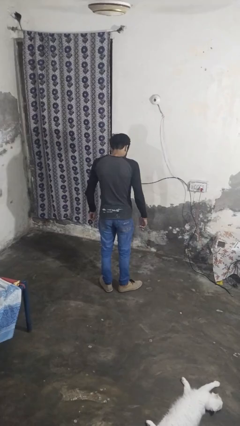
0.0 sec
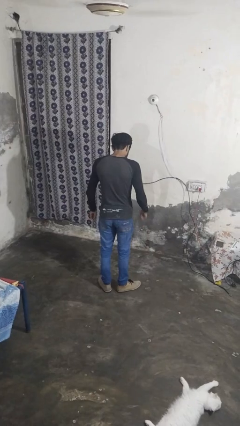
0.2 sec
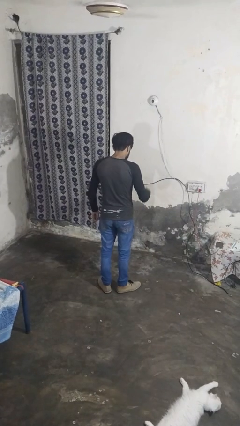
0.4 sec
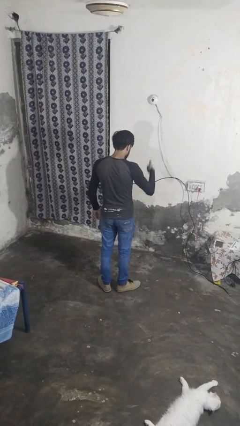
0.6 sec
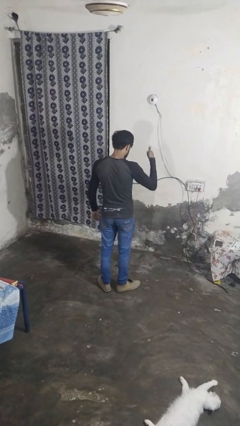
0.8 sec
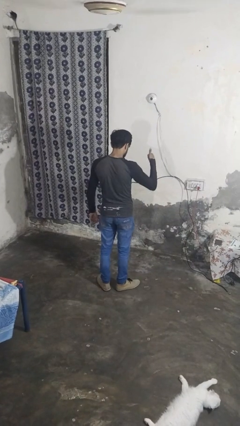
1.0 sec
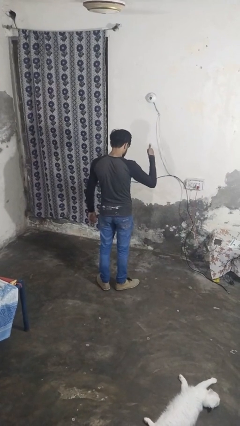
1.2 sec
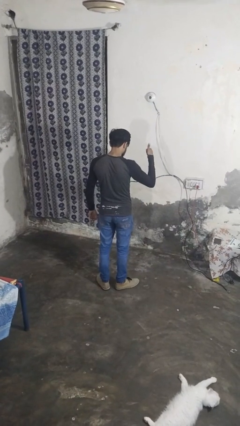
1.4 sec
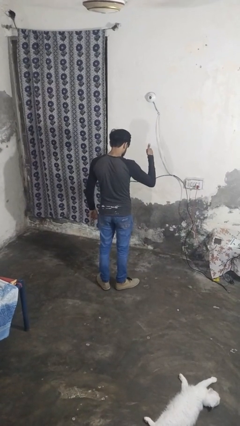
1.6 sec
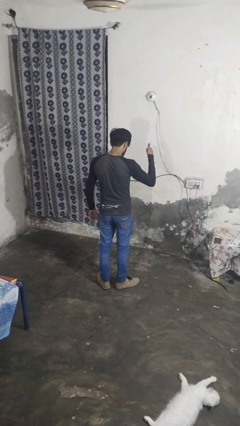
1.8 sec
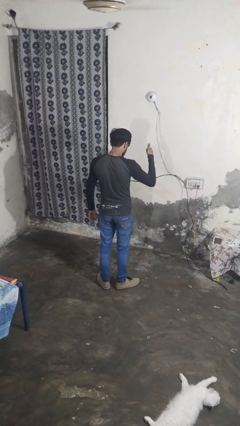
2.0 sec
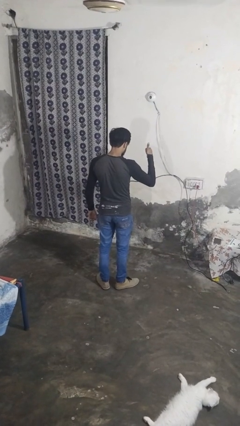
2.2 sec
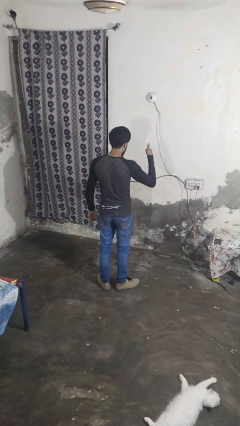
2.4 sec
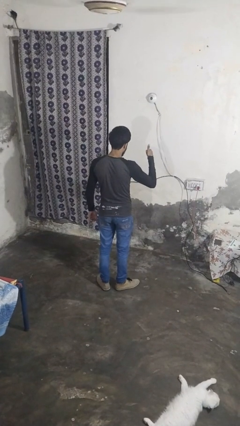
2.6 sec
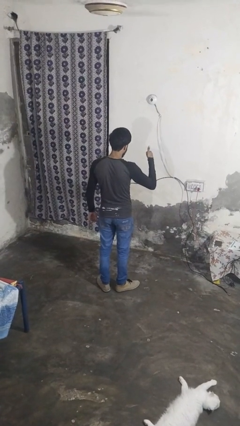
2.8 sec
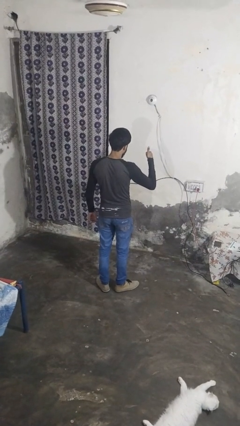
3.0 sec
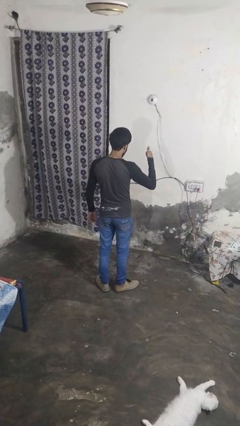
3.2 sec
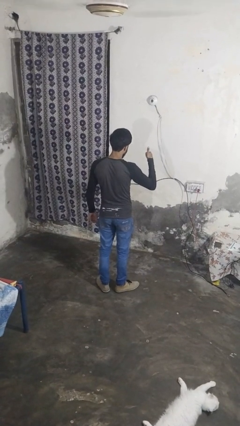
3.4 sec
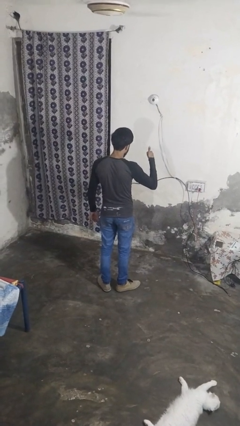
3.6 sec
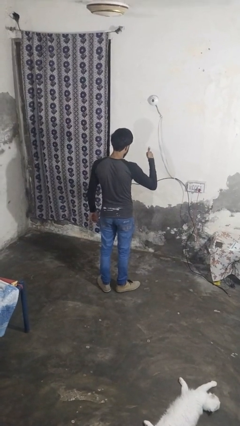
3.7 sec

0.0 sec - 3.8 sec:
person gestures thumbs up

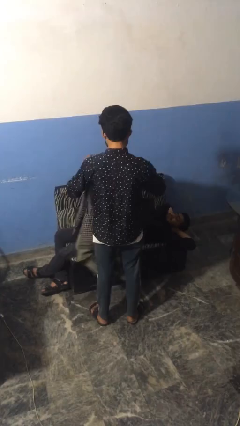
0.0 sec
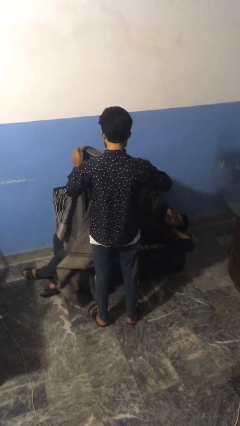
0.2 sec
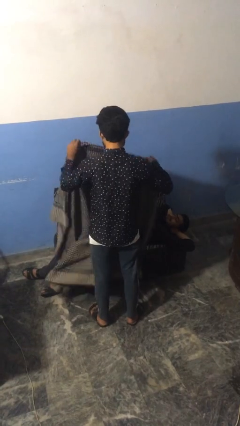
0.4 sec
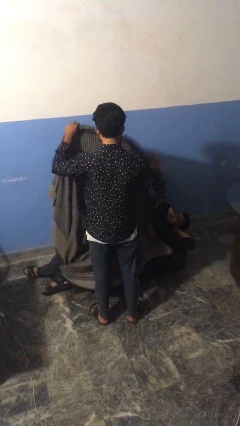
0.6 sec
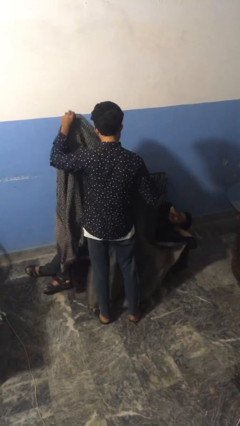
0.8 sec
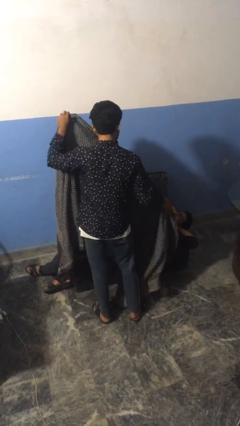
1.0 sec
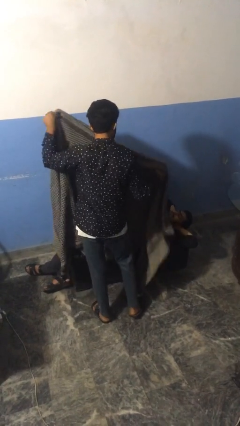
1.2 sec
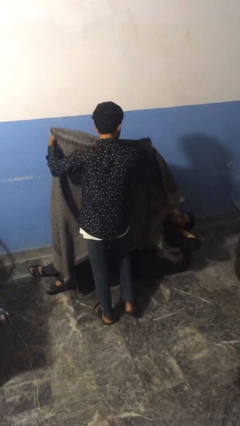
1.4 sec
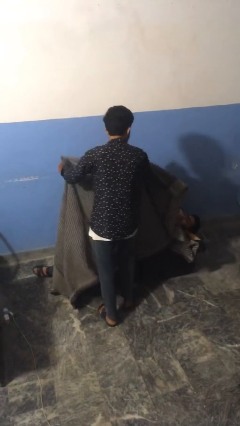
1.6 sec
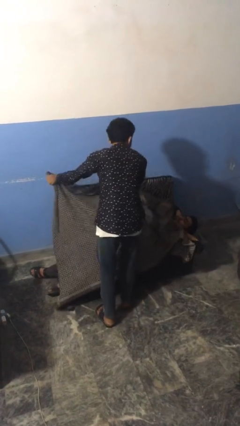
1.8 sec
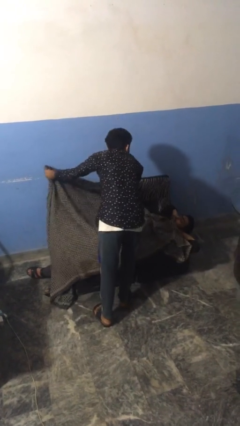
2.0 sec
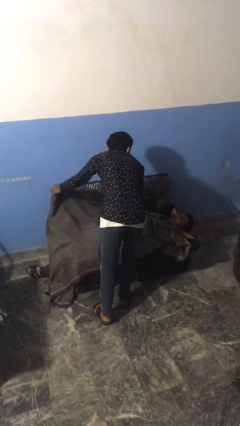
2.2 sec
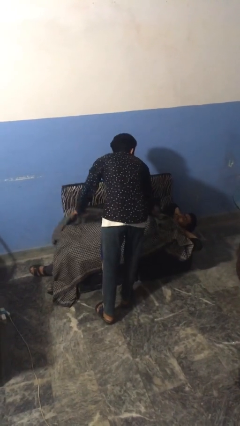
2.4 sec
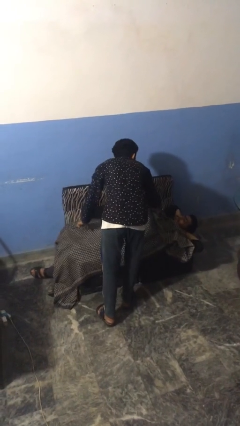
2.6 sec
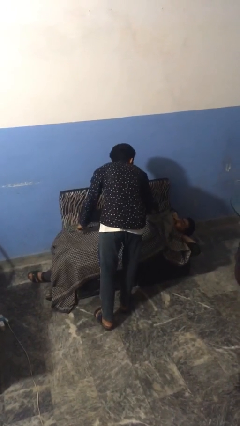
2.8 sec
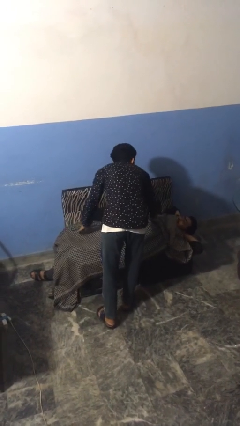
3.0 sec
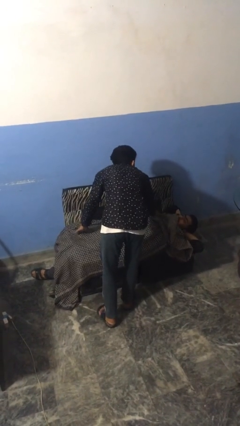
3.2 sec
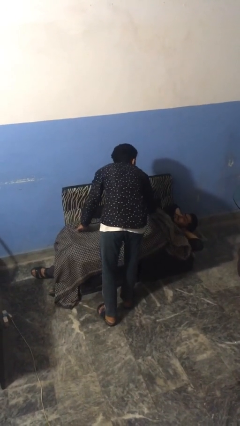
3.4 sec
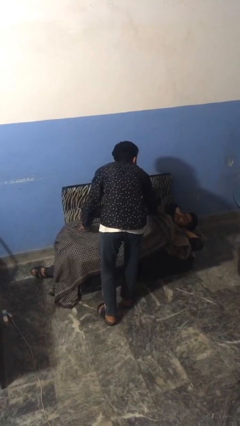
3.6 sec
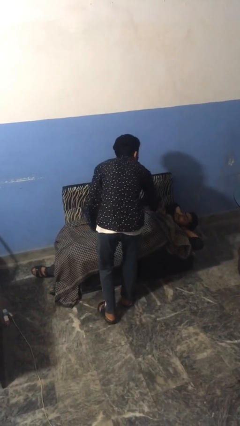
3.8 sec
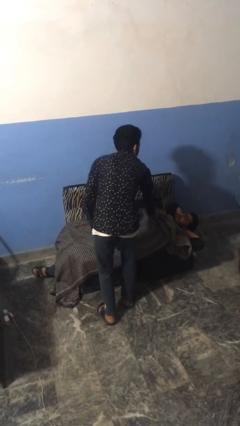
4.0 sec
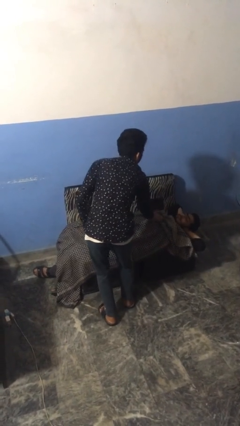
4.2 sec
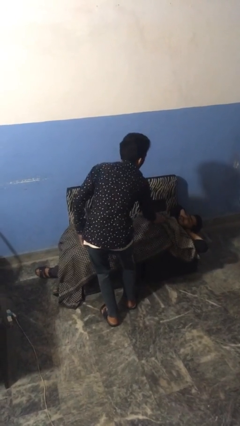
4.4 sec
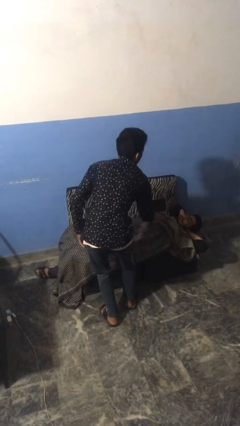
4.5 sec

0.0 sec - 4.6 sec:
person covers friend with blanket

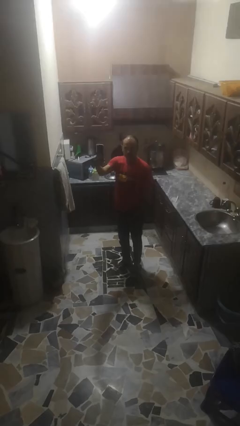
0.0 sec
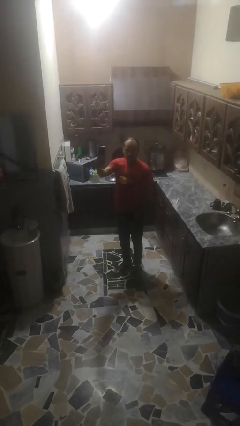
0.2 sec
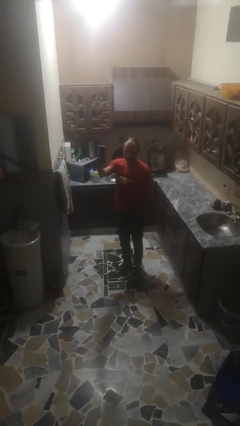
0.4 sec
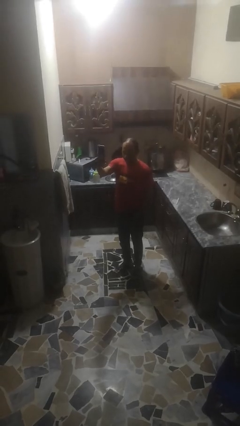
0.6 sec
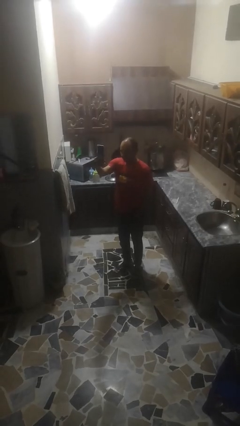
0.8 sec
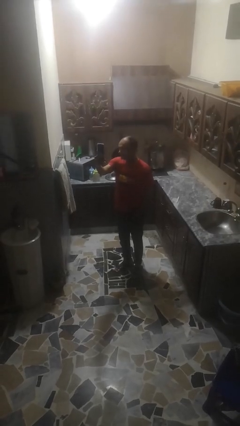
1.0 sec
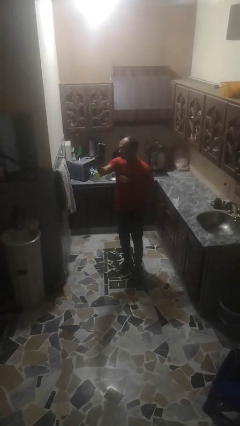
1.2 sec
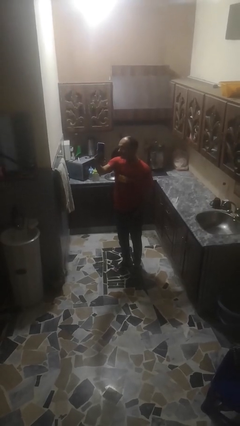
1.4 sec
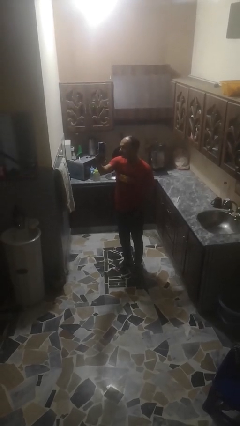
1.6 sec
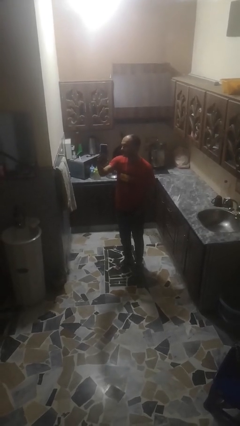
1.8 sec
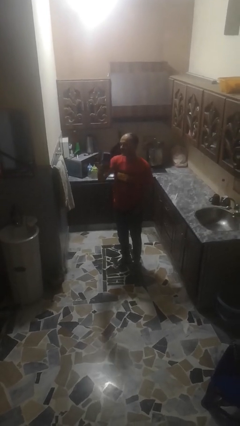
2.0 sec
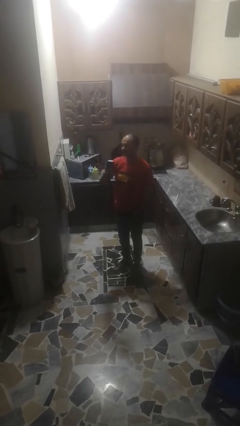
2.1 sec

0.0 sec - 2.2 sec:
person takes selfie

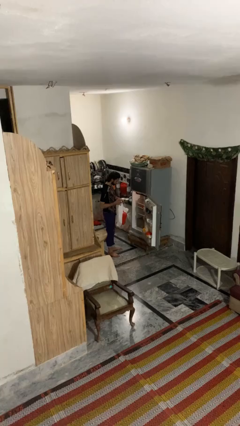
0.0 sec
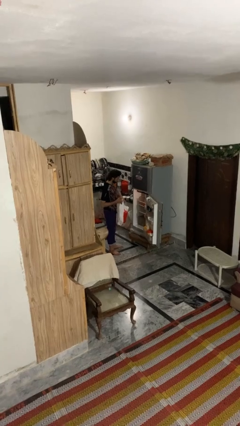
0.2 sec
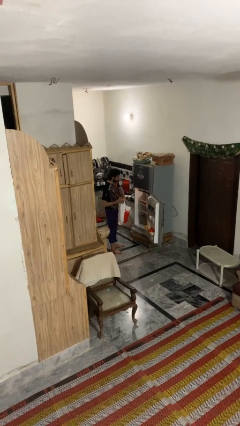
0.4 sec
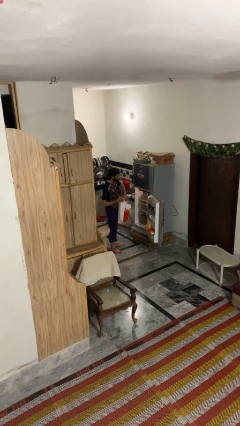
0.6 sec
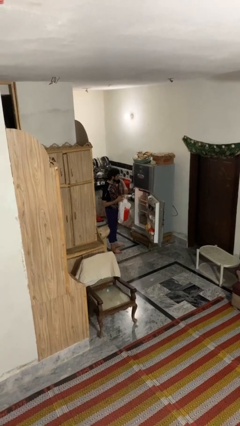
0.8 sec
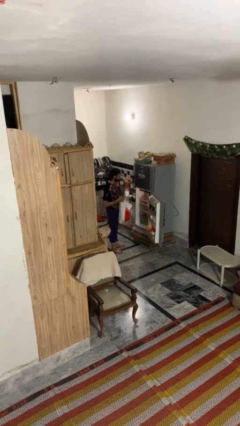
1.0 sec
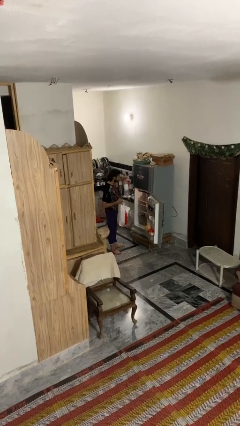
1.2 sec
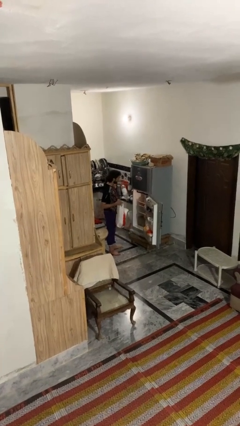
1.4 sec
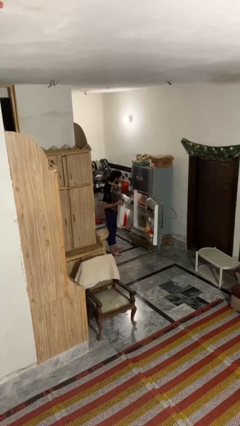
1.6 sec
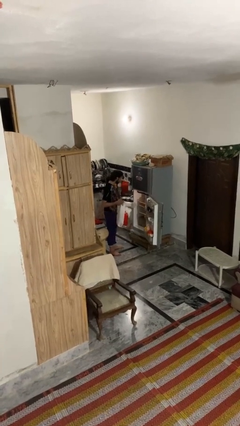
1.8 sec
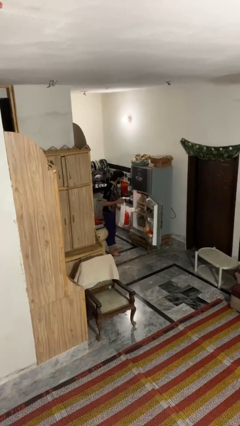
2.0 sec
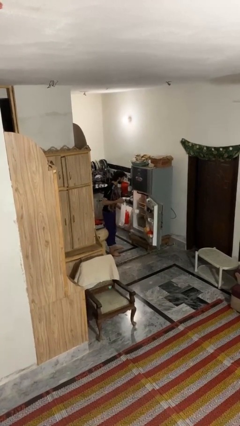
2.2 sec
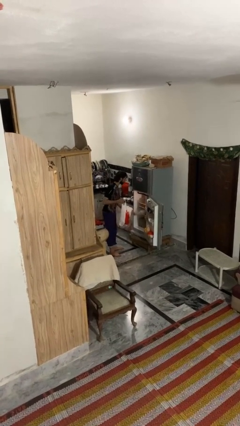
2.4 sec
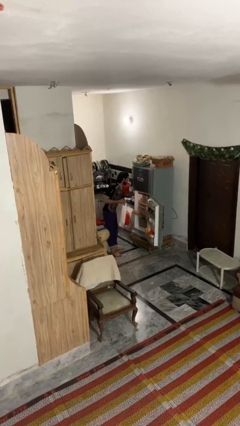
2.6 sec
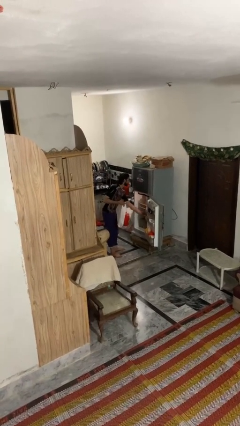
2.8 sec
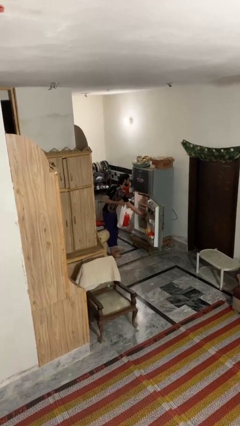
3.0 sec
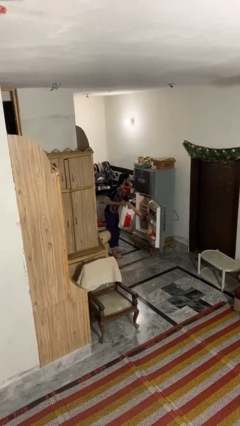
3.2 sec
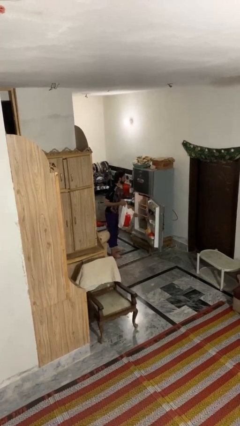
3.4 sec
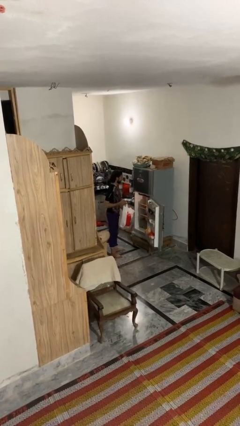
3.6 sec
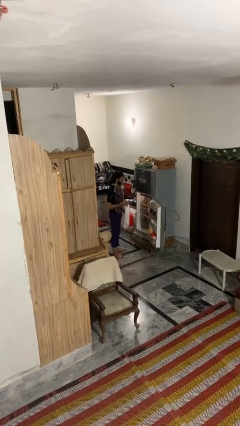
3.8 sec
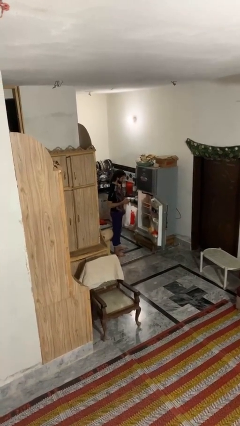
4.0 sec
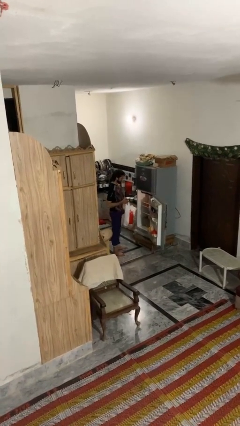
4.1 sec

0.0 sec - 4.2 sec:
person loads groceries into refrigerator

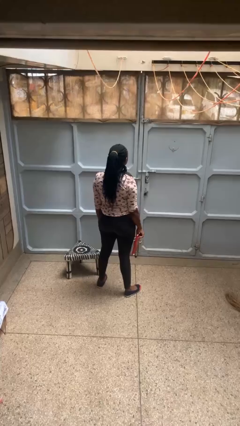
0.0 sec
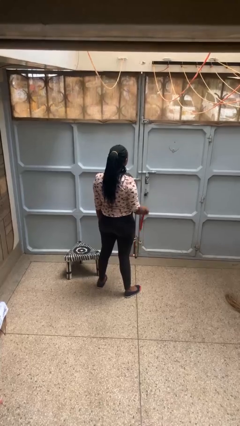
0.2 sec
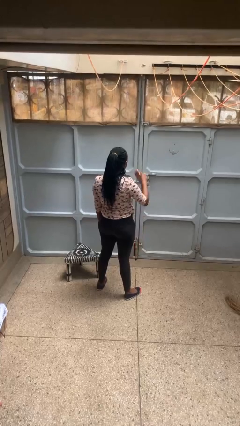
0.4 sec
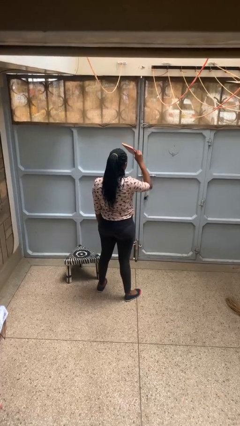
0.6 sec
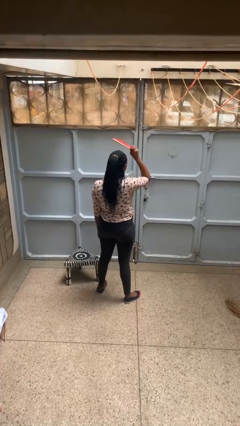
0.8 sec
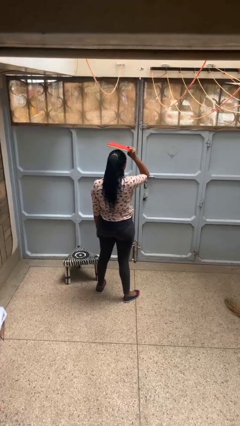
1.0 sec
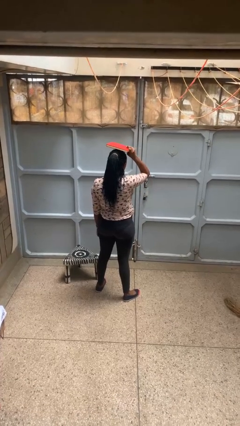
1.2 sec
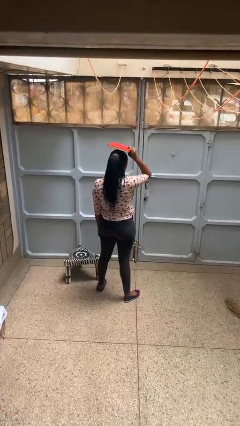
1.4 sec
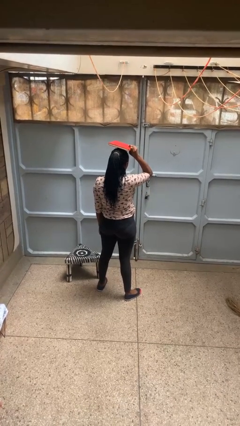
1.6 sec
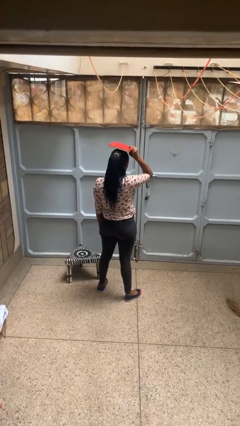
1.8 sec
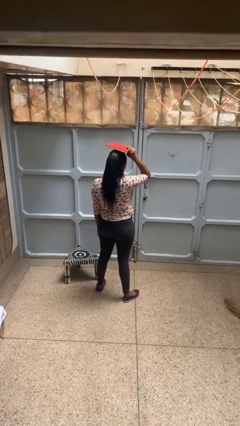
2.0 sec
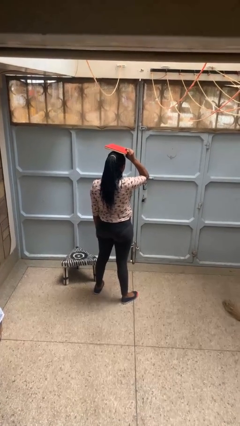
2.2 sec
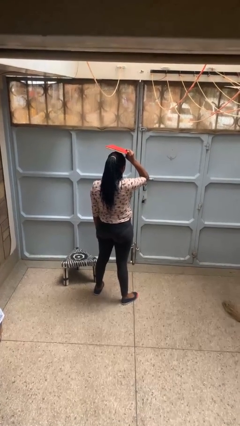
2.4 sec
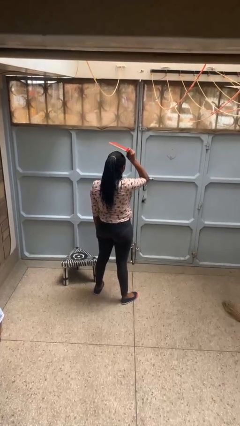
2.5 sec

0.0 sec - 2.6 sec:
person holds object above head

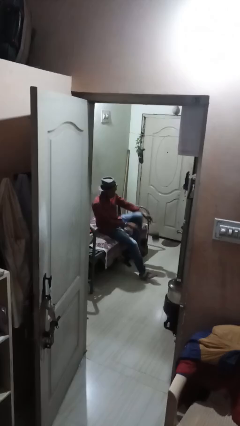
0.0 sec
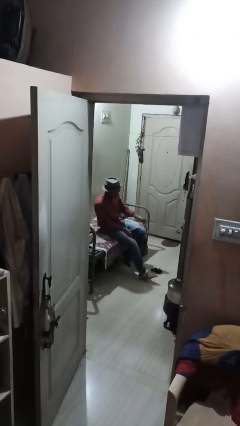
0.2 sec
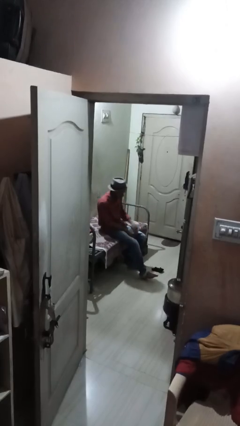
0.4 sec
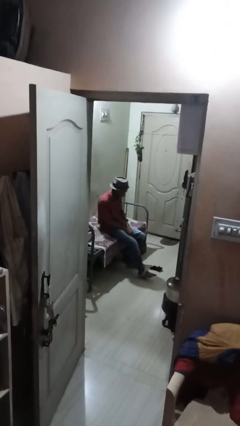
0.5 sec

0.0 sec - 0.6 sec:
person takes off socks
